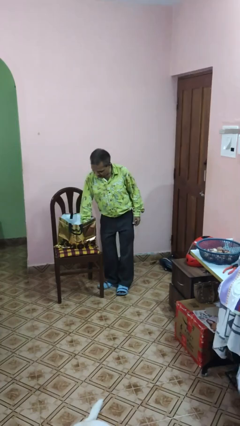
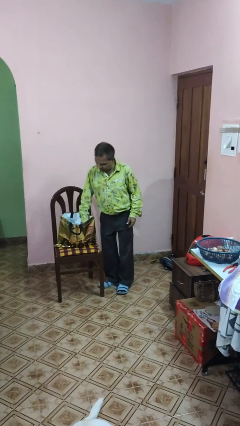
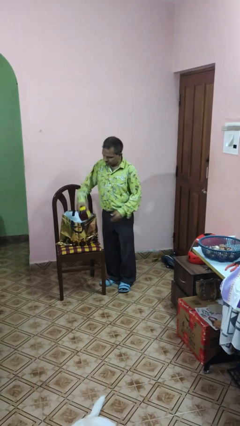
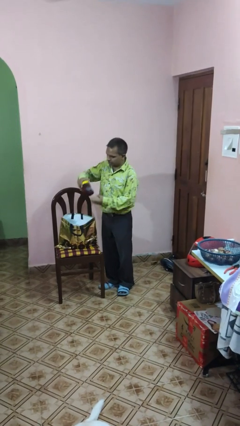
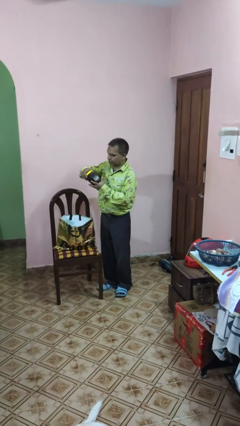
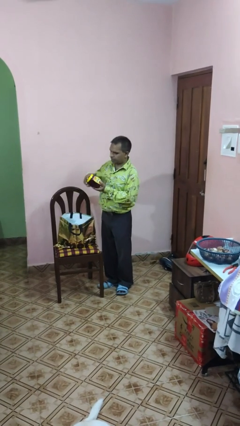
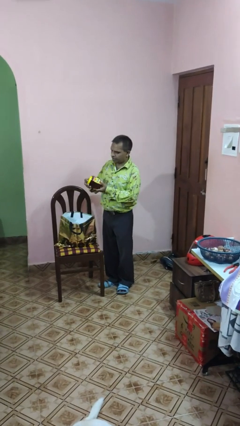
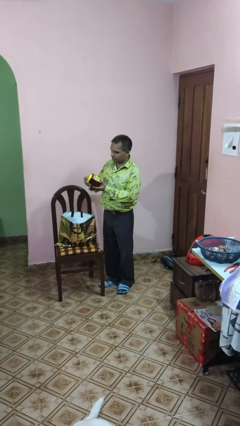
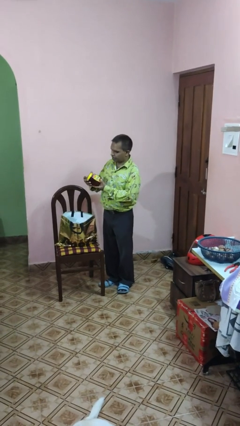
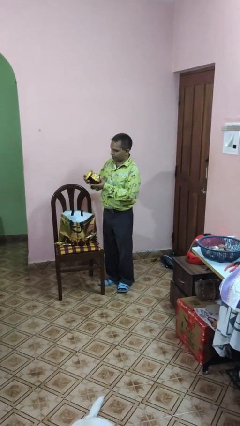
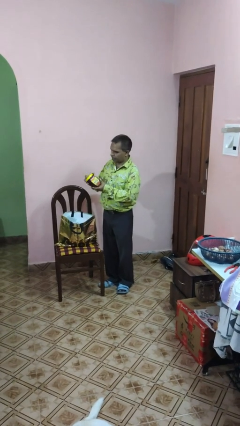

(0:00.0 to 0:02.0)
person takes object from bag

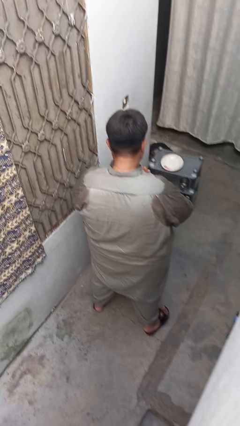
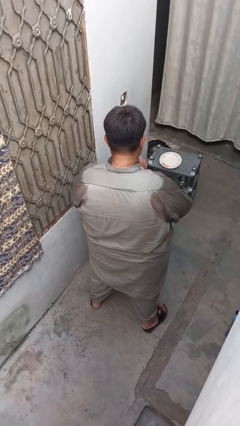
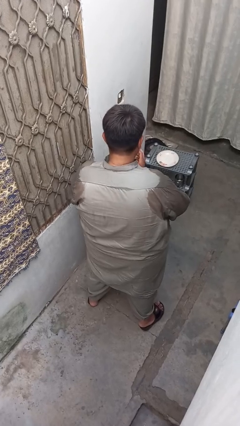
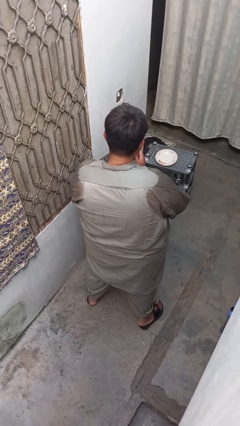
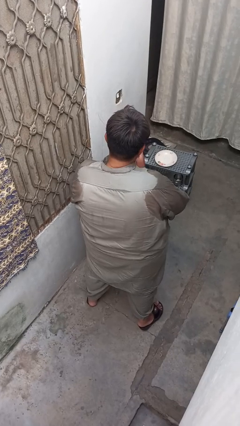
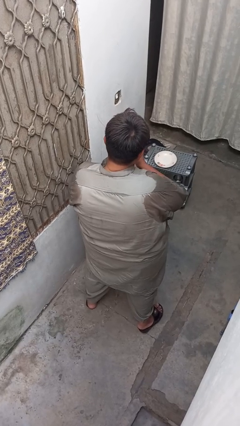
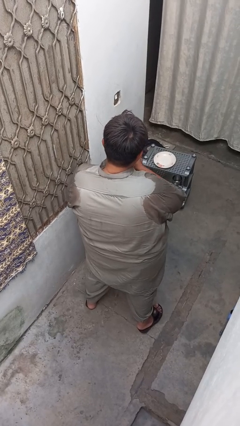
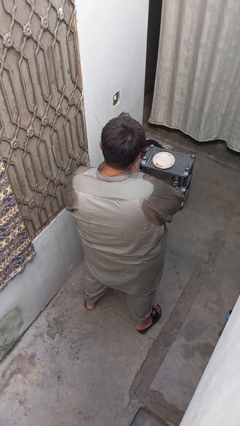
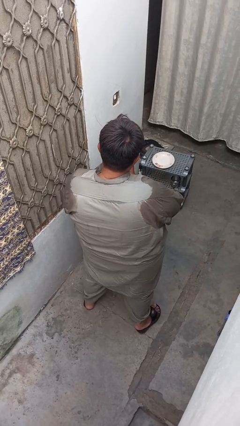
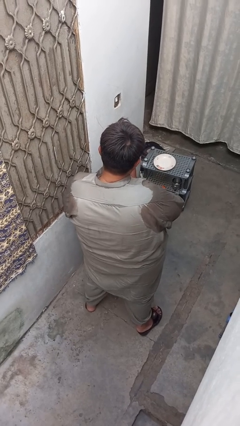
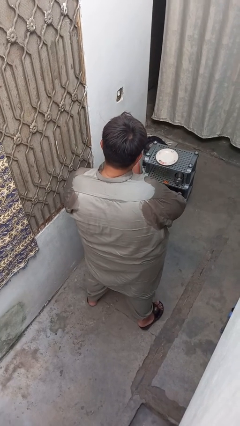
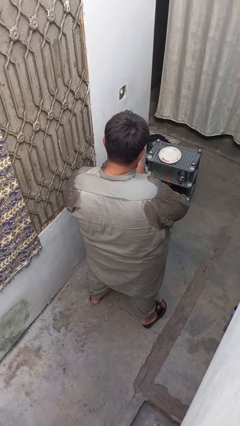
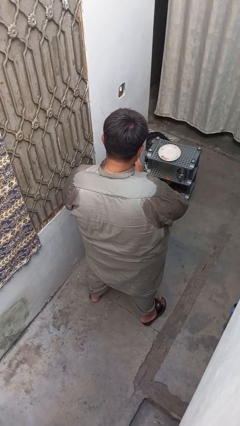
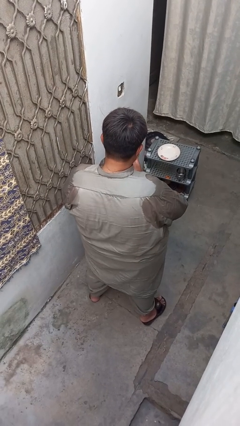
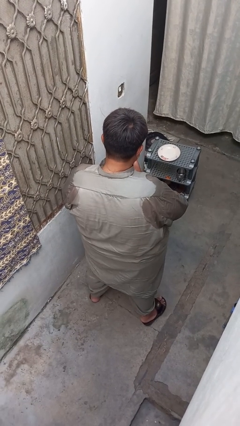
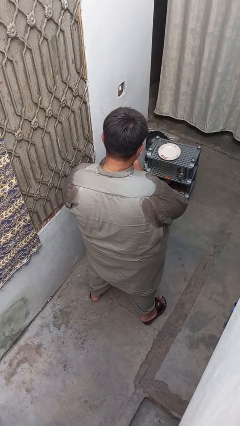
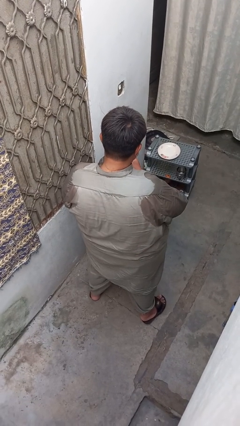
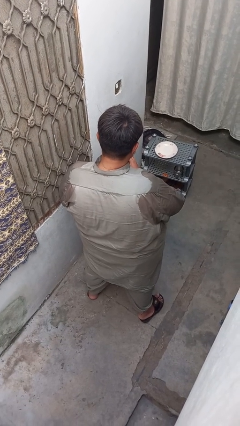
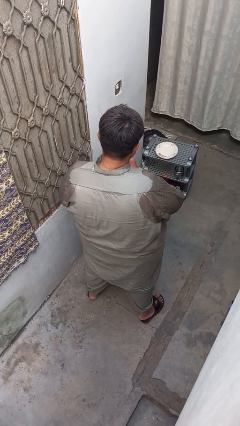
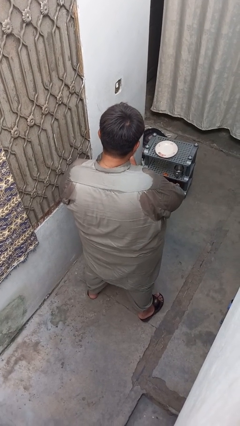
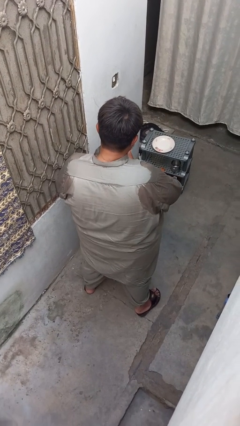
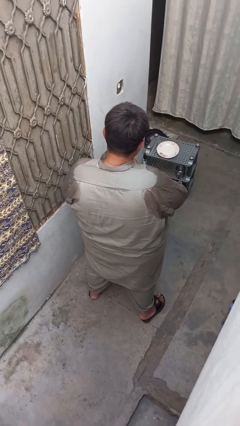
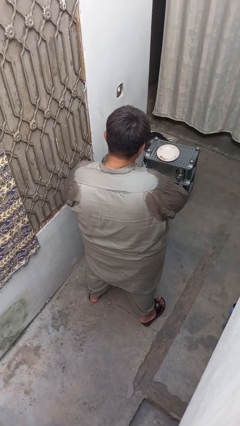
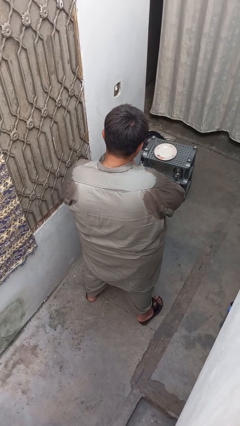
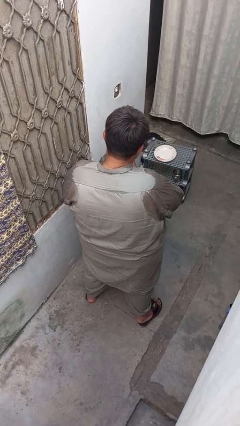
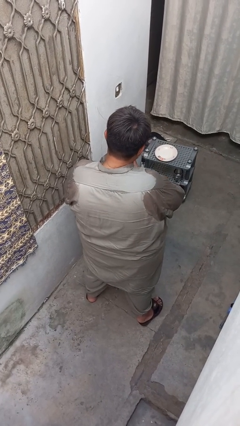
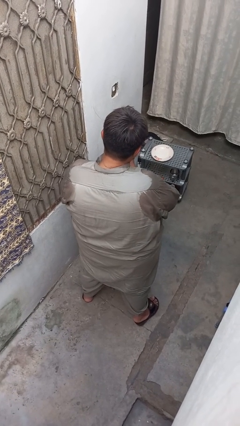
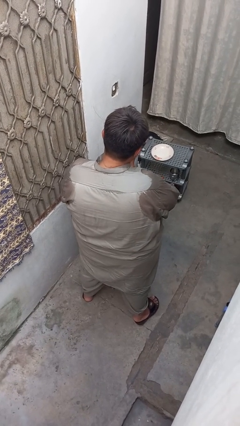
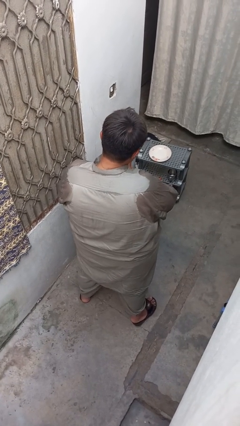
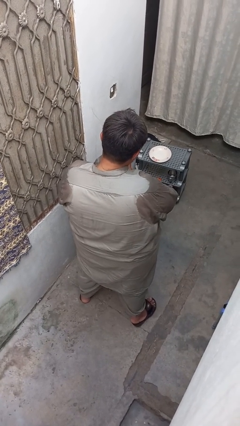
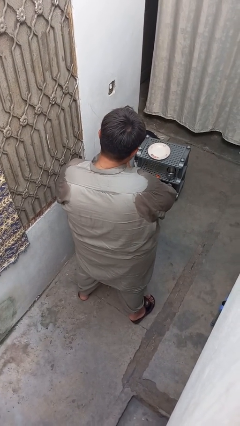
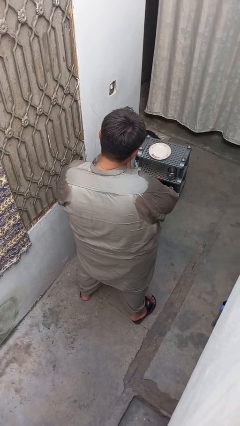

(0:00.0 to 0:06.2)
person puts on wristwatch

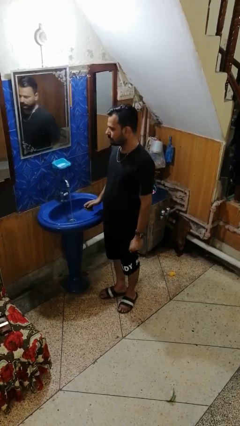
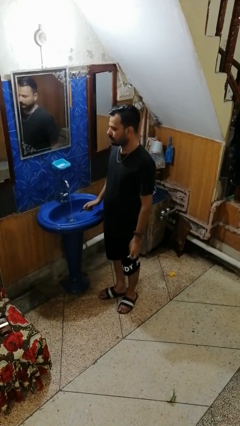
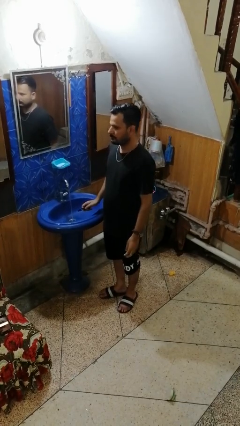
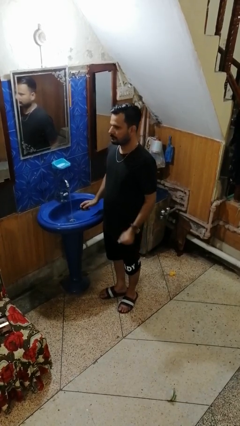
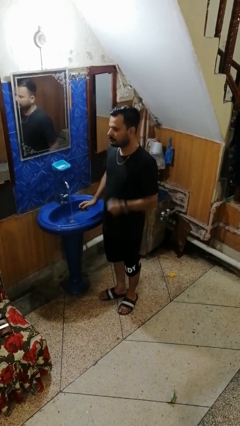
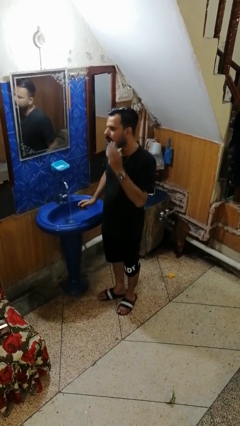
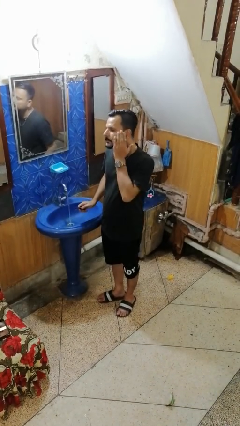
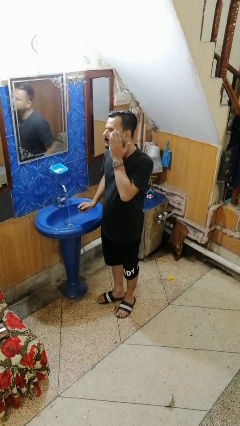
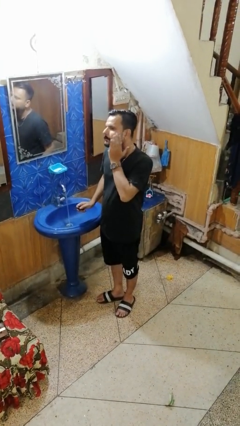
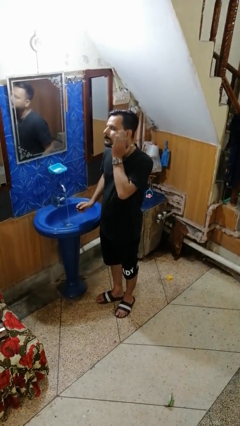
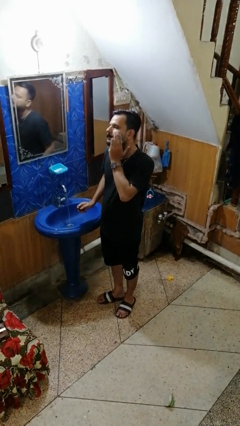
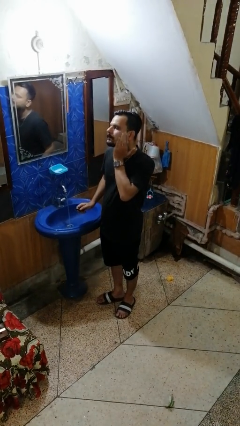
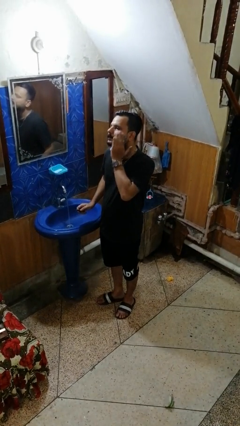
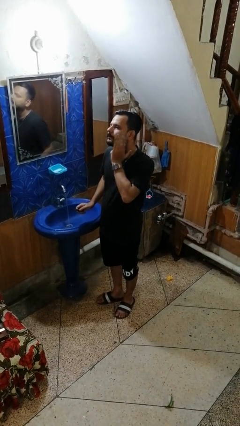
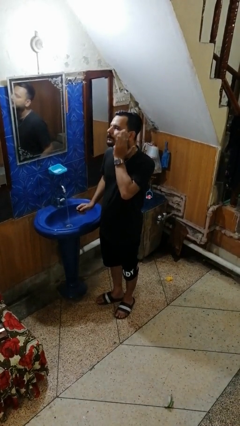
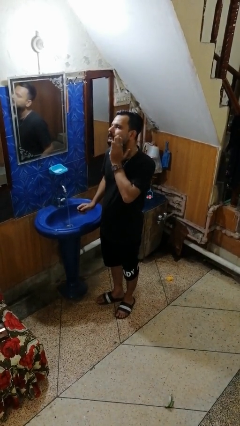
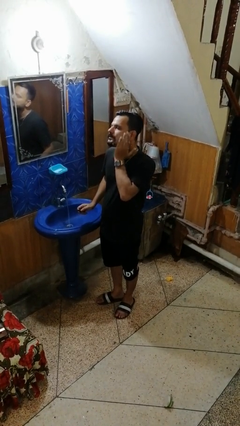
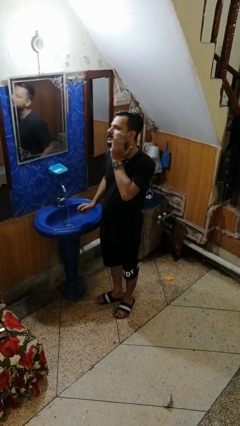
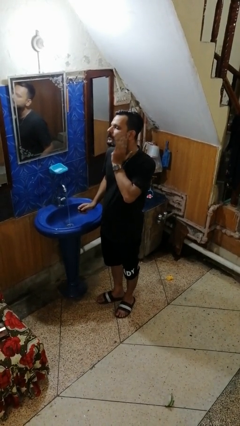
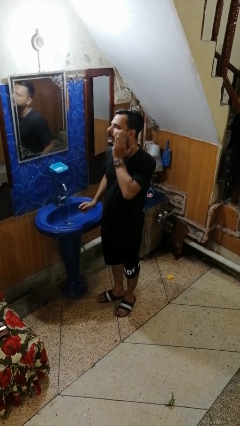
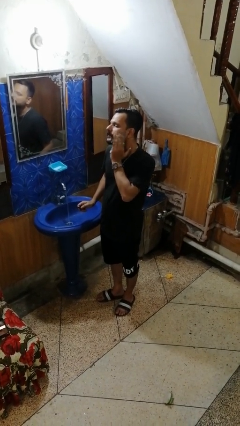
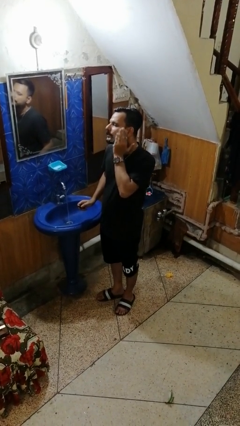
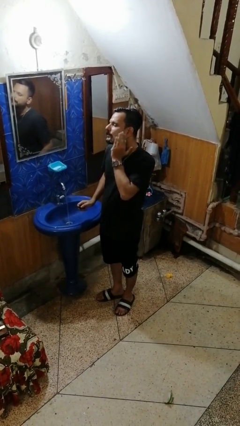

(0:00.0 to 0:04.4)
person applies shaving cream

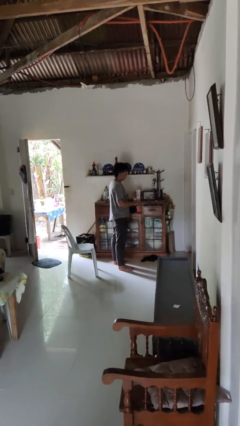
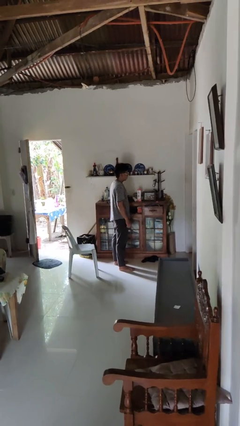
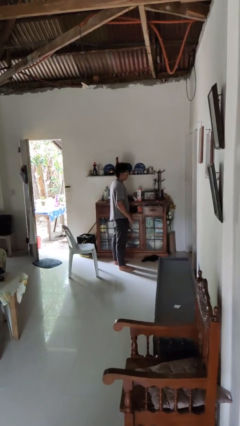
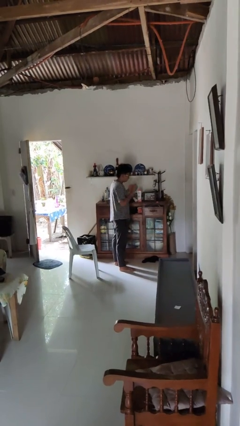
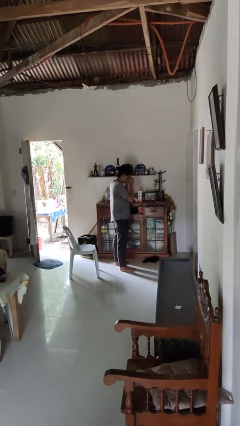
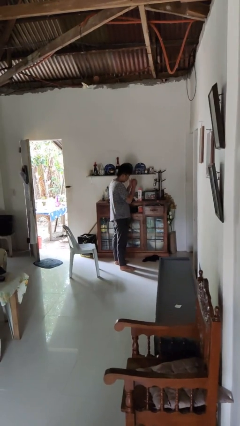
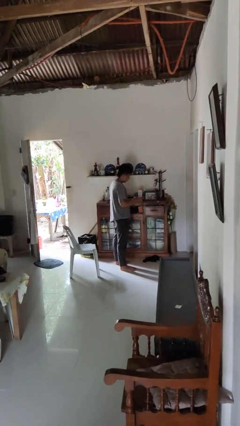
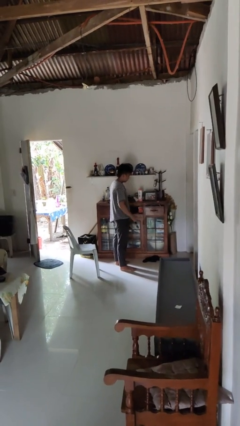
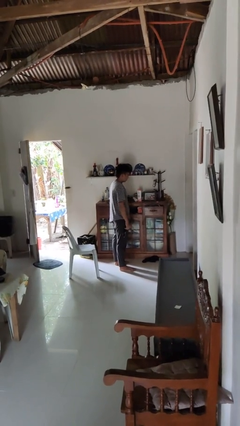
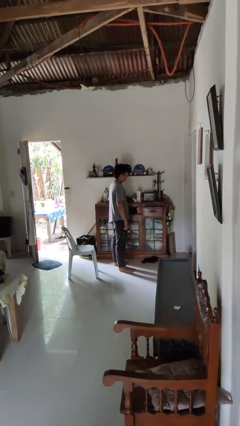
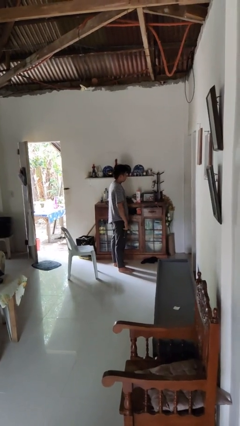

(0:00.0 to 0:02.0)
person takes off sunglasses

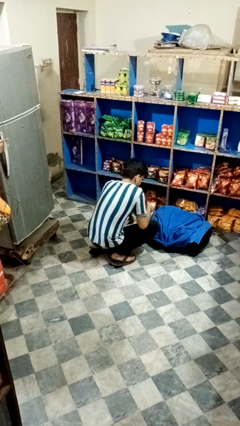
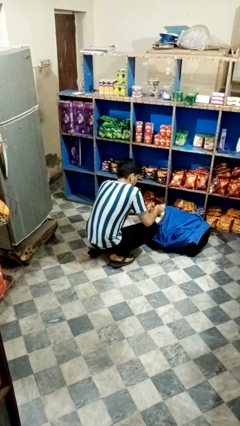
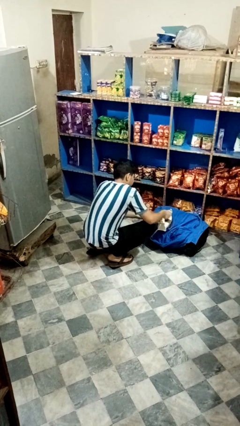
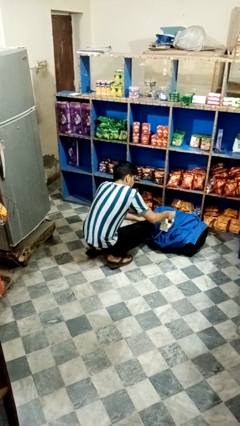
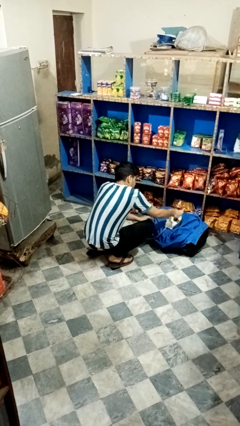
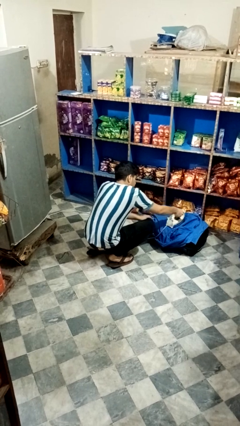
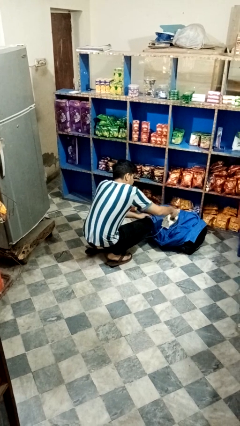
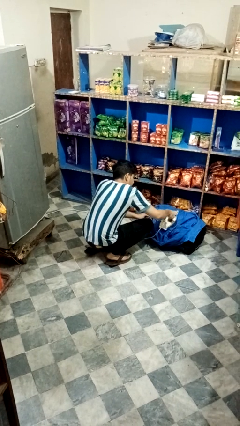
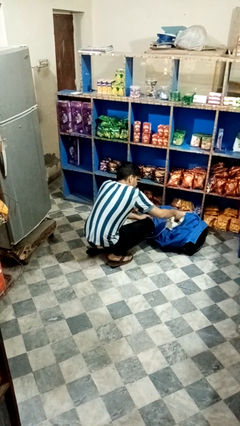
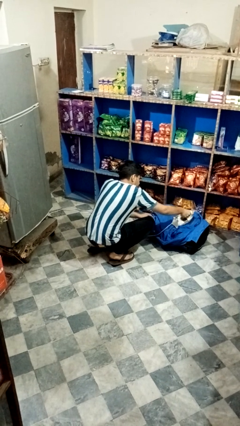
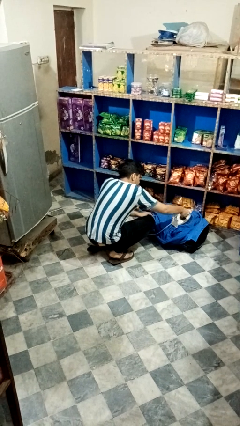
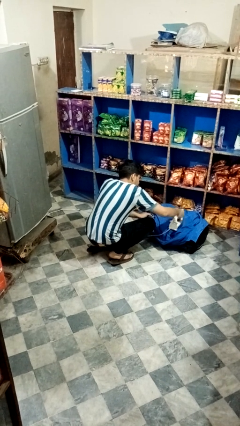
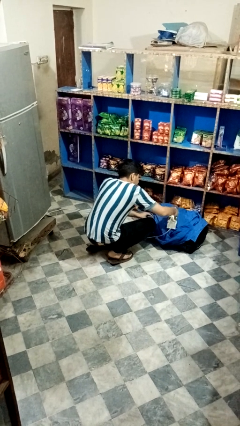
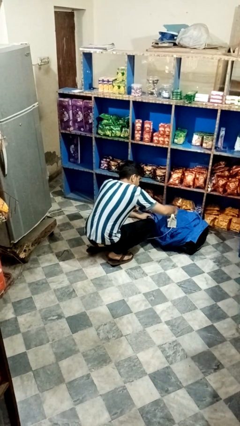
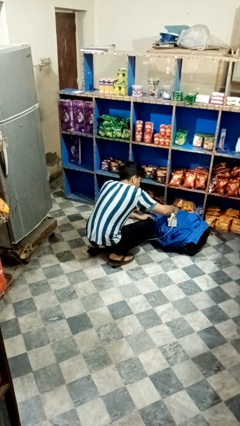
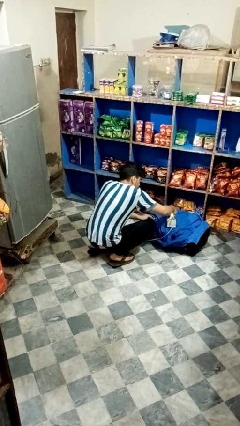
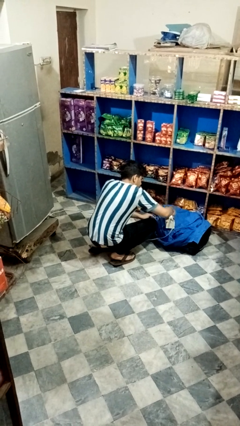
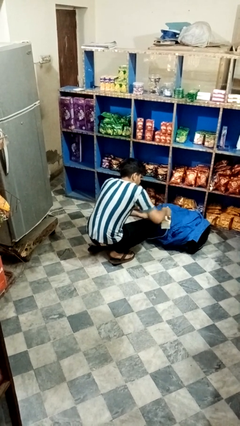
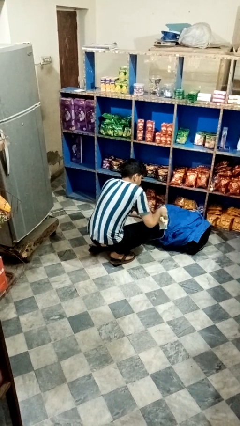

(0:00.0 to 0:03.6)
person irons clothes
